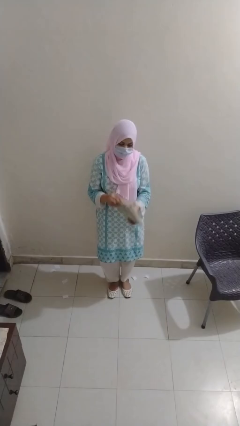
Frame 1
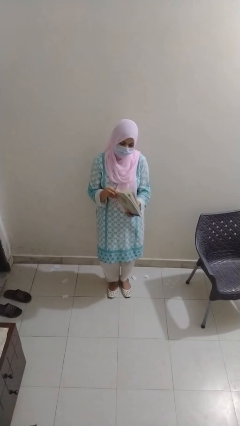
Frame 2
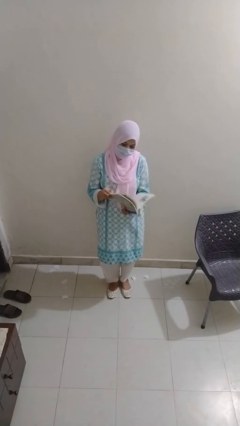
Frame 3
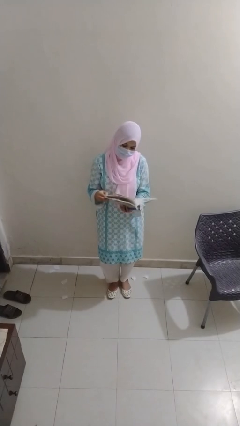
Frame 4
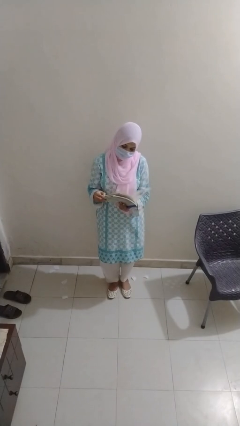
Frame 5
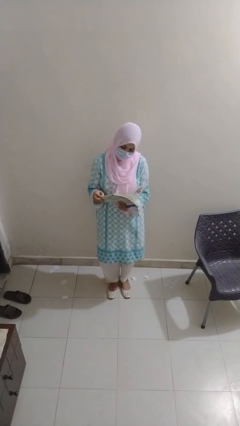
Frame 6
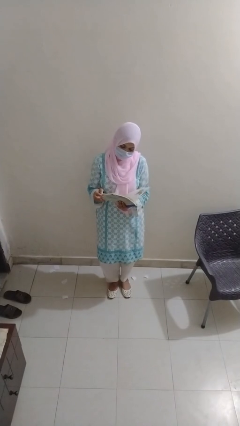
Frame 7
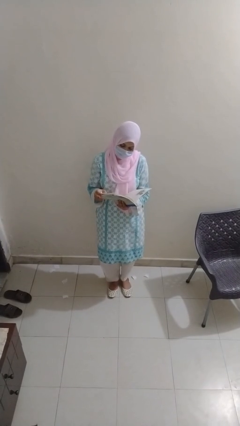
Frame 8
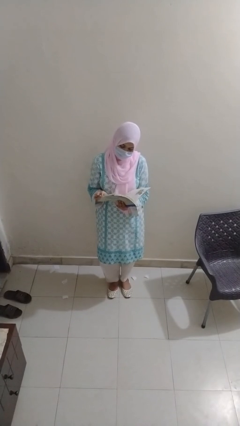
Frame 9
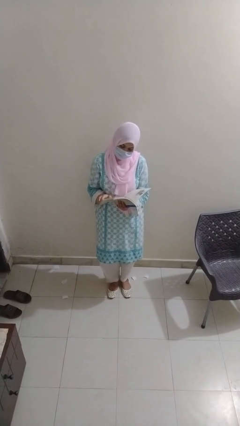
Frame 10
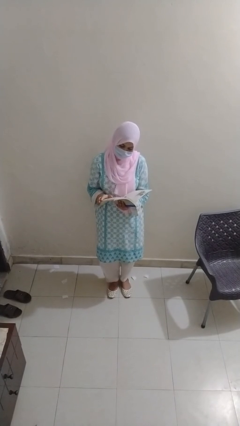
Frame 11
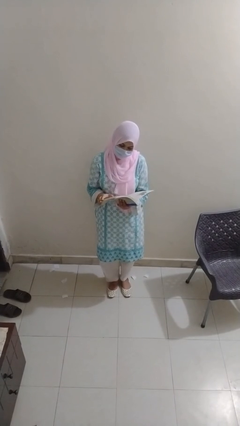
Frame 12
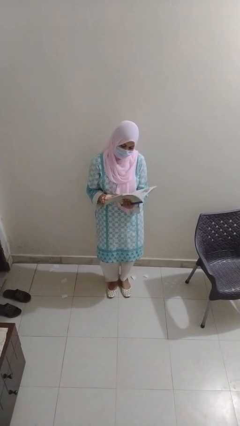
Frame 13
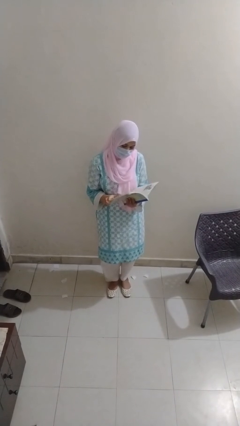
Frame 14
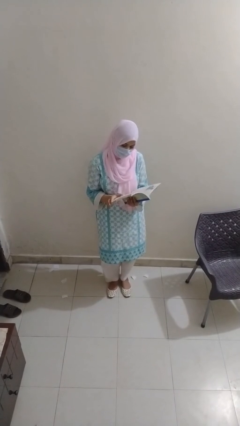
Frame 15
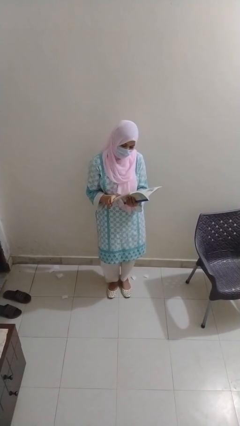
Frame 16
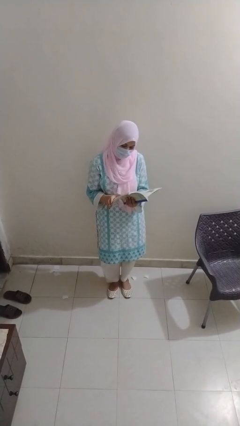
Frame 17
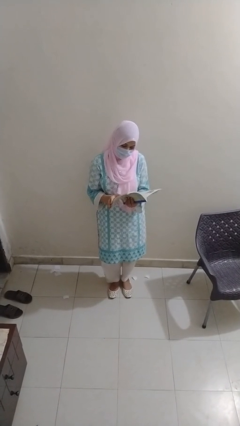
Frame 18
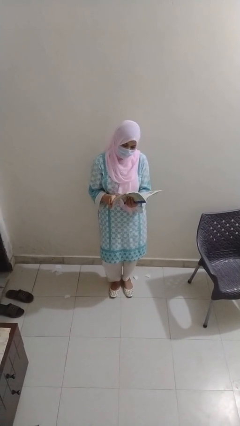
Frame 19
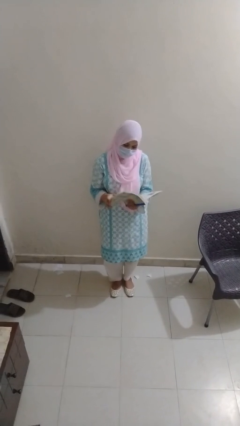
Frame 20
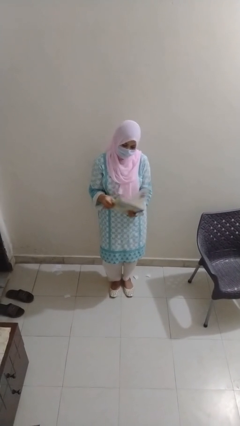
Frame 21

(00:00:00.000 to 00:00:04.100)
person reads book

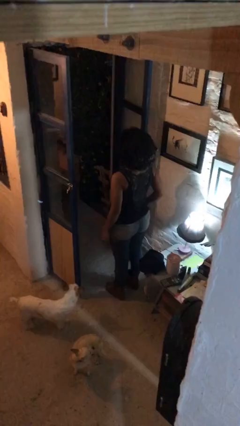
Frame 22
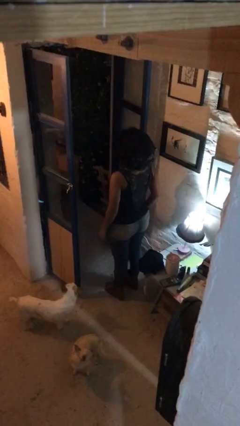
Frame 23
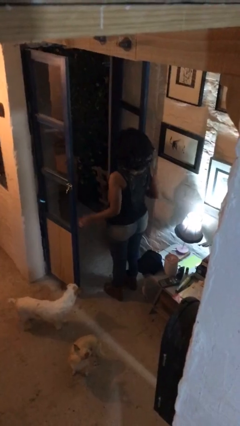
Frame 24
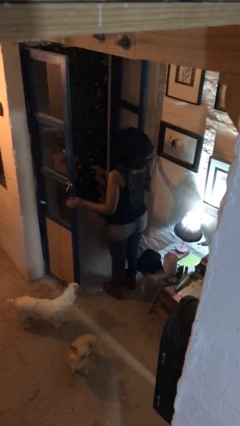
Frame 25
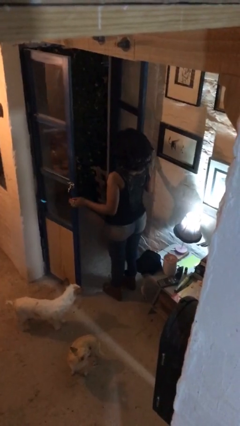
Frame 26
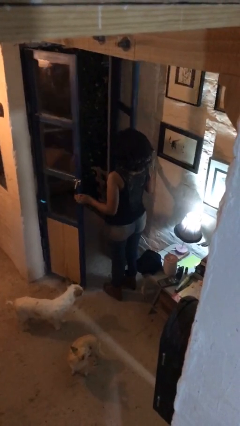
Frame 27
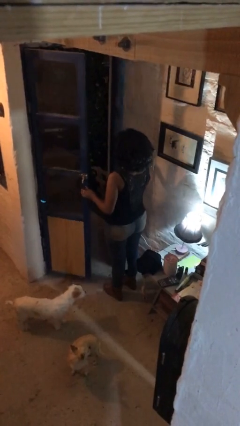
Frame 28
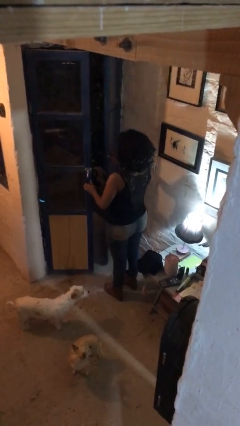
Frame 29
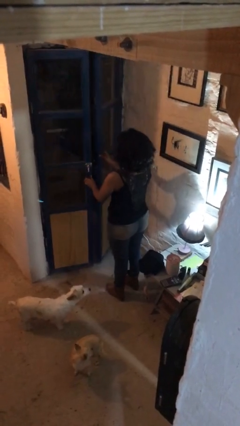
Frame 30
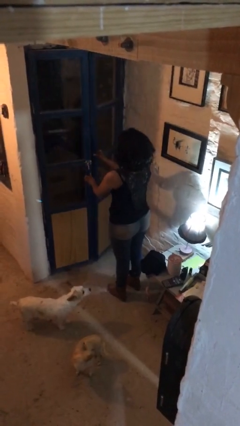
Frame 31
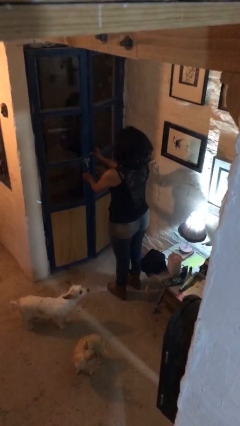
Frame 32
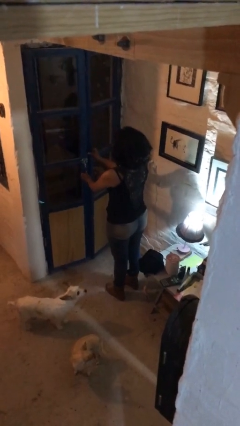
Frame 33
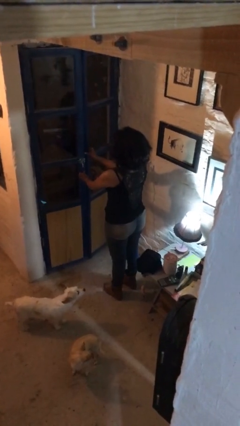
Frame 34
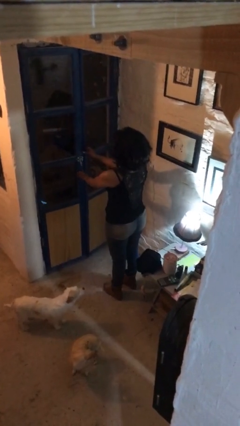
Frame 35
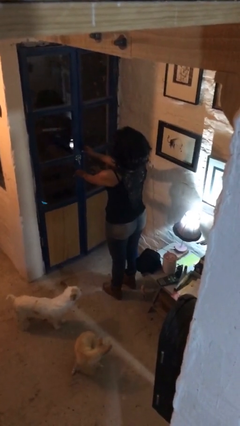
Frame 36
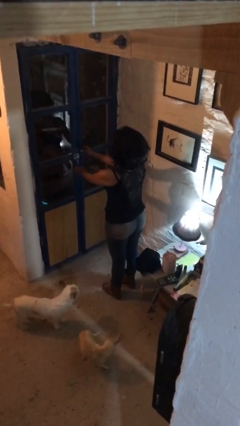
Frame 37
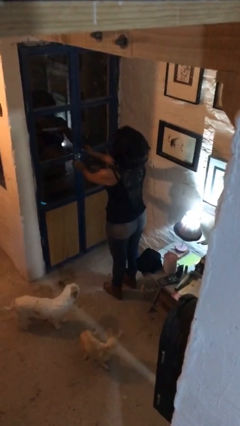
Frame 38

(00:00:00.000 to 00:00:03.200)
person closes facility door

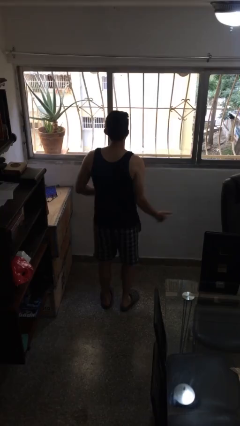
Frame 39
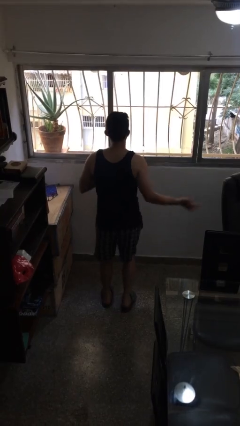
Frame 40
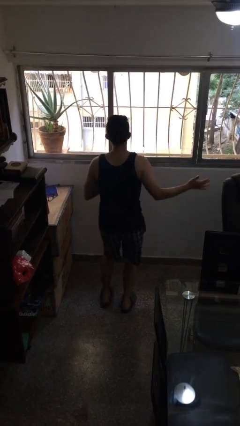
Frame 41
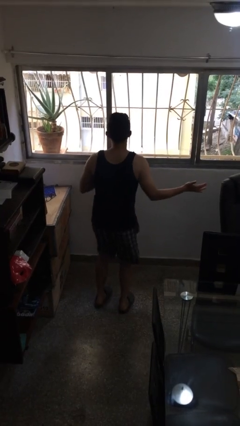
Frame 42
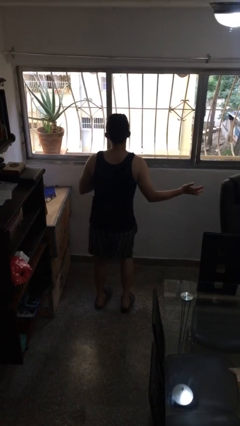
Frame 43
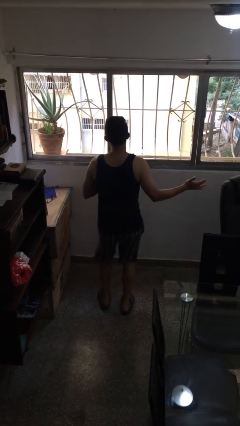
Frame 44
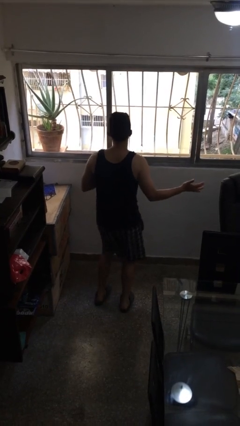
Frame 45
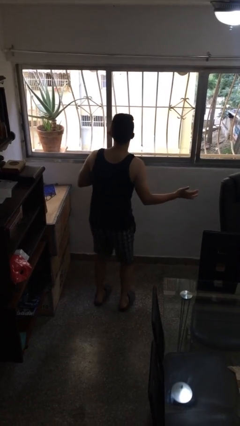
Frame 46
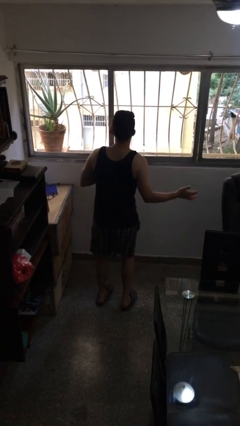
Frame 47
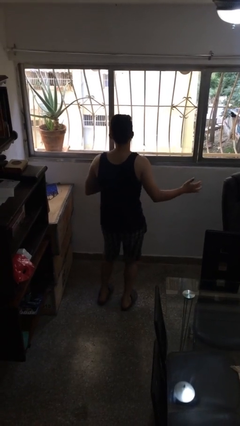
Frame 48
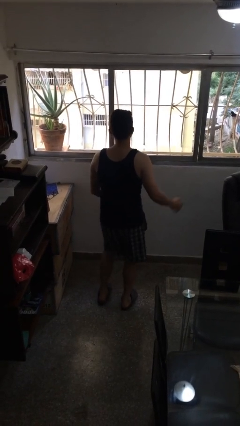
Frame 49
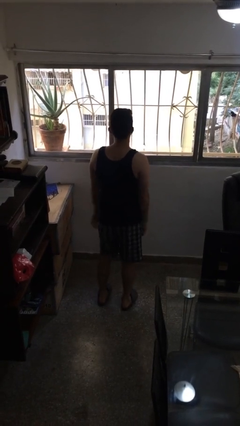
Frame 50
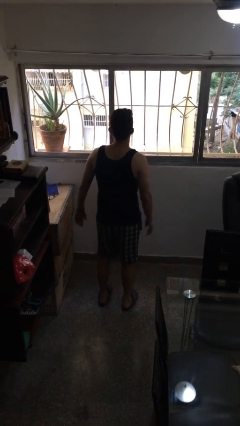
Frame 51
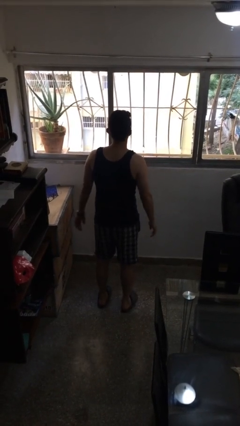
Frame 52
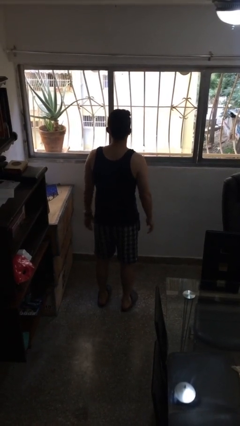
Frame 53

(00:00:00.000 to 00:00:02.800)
person dances in place

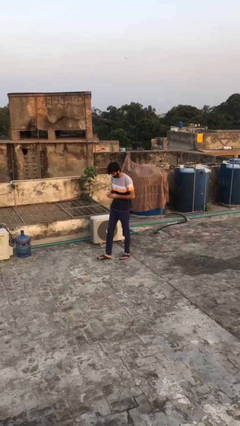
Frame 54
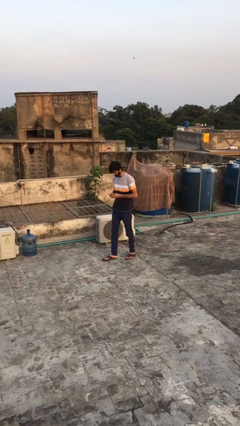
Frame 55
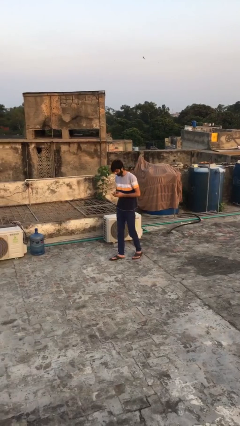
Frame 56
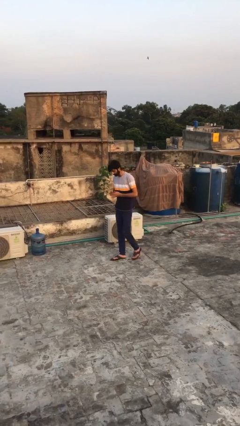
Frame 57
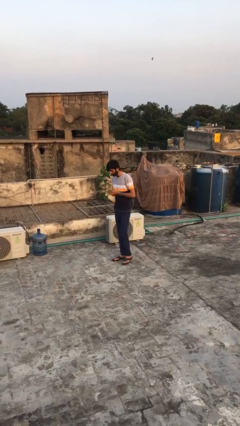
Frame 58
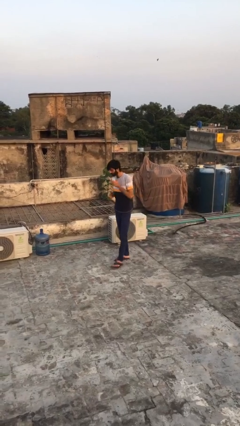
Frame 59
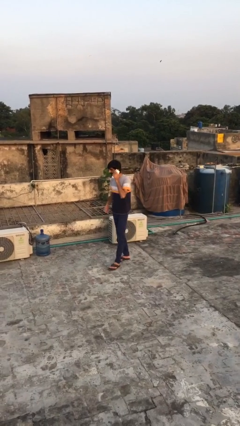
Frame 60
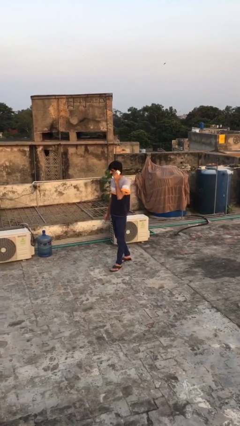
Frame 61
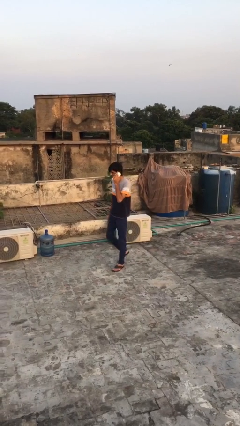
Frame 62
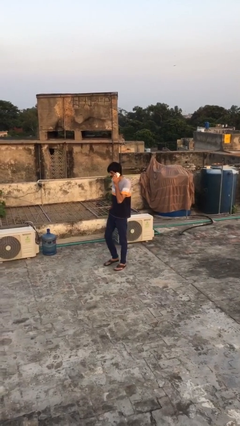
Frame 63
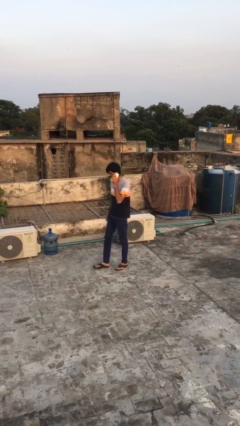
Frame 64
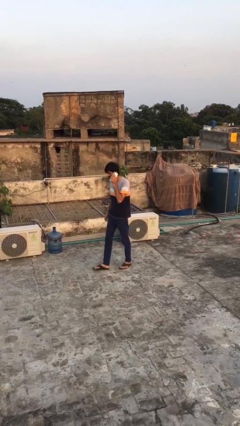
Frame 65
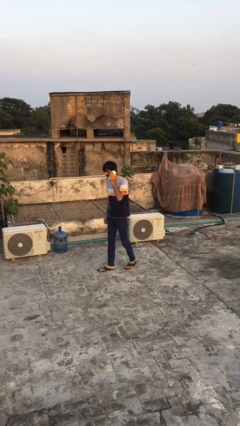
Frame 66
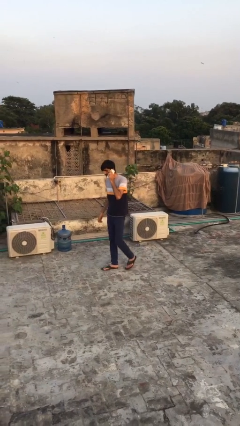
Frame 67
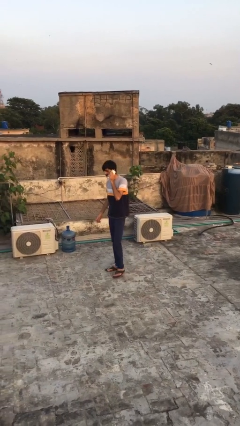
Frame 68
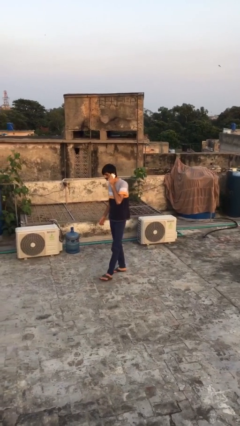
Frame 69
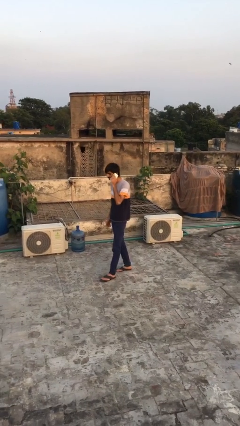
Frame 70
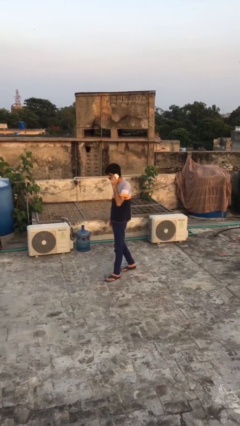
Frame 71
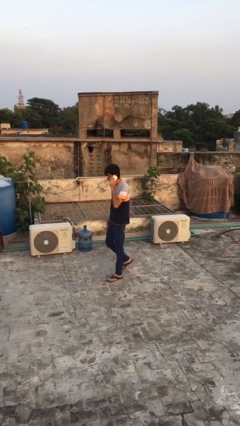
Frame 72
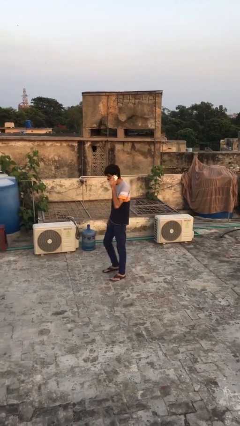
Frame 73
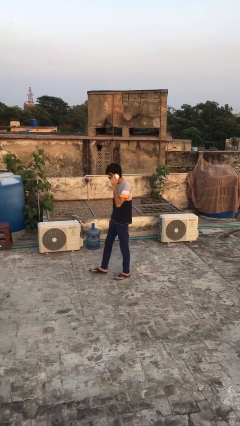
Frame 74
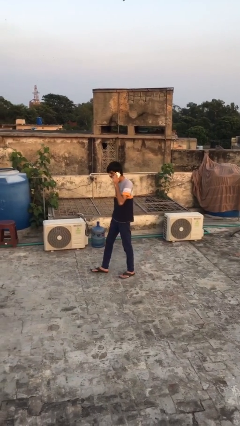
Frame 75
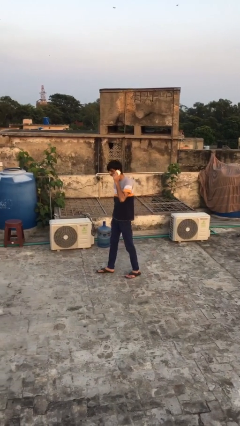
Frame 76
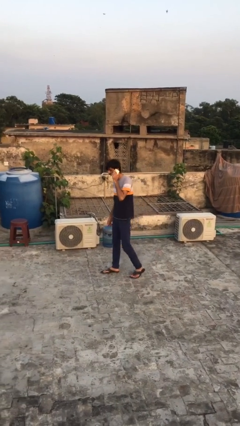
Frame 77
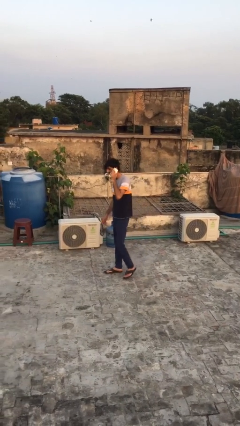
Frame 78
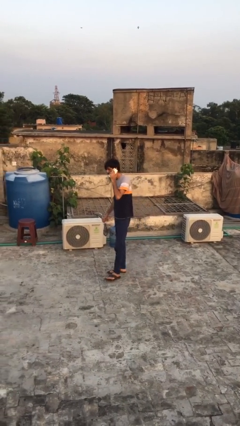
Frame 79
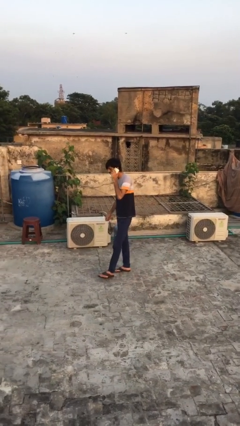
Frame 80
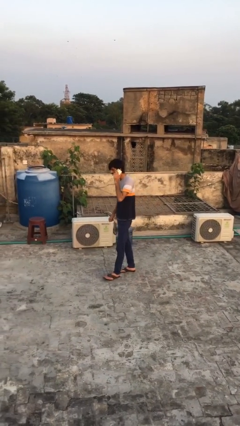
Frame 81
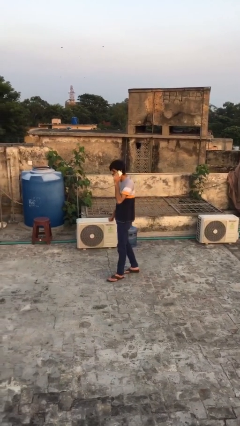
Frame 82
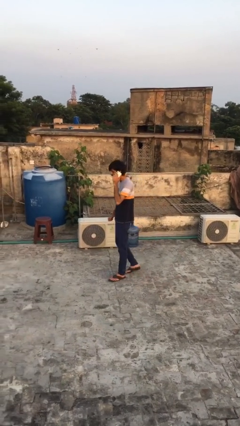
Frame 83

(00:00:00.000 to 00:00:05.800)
person talks on phone

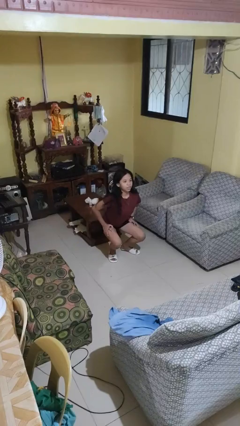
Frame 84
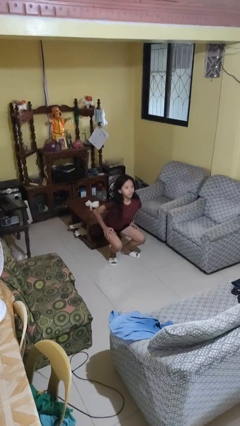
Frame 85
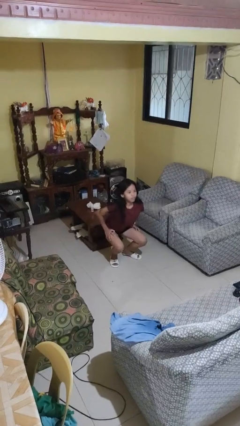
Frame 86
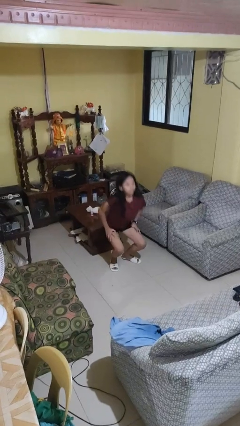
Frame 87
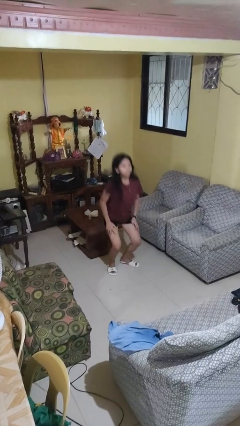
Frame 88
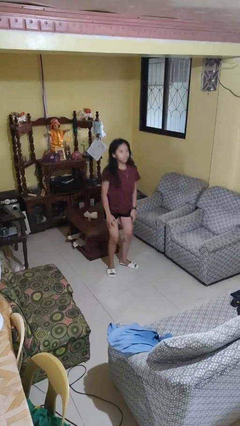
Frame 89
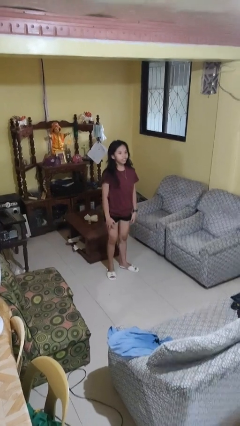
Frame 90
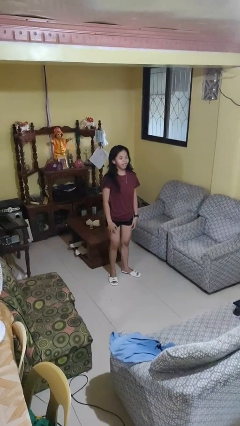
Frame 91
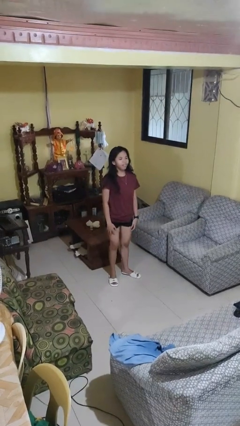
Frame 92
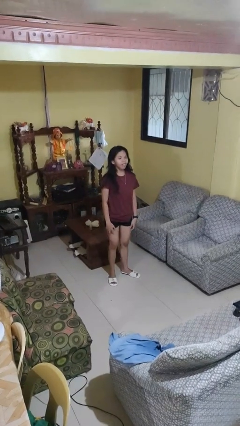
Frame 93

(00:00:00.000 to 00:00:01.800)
person stands up
